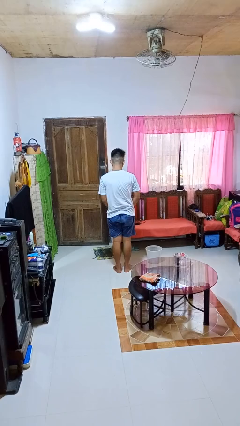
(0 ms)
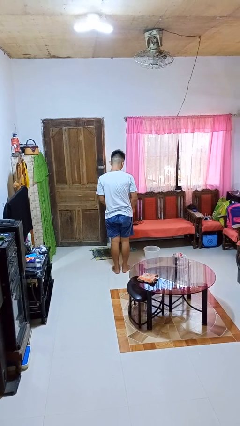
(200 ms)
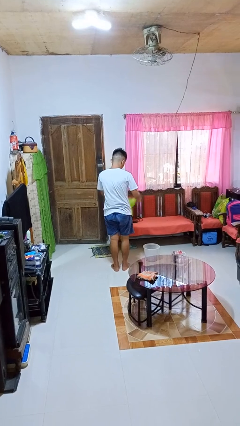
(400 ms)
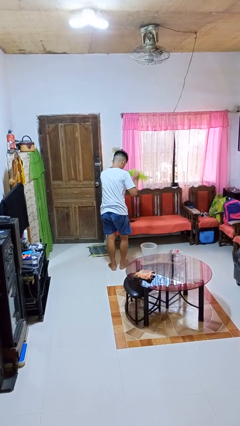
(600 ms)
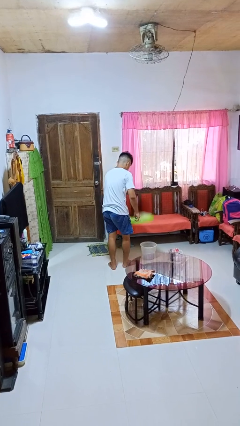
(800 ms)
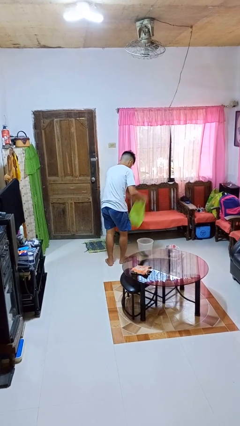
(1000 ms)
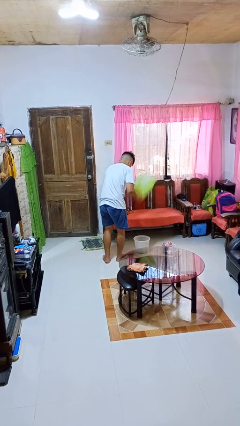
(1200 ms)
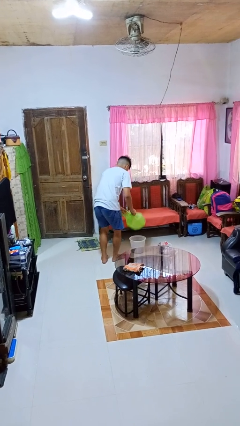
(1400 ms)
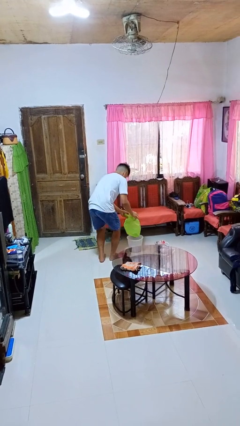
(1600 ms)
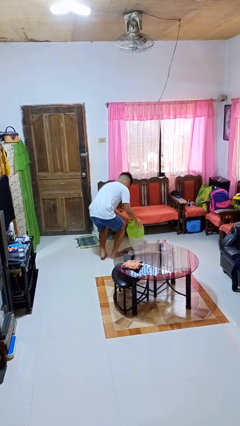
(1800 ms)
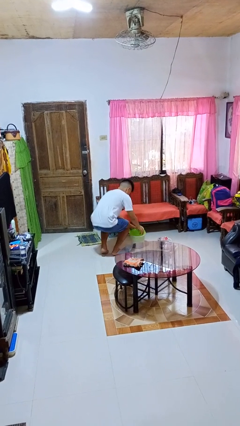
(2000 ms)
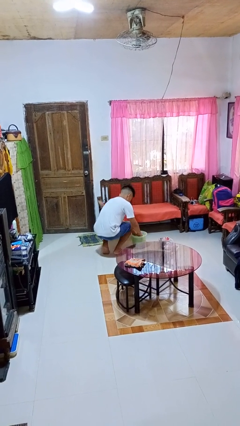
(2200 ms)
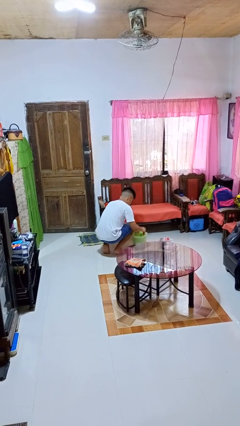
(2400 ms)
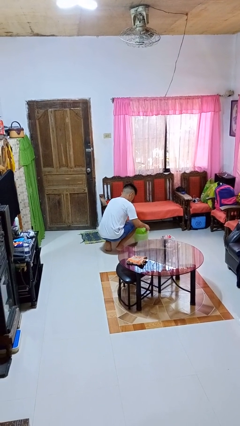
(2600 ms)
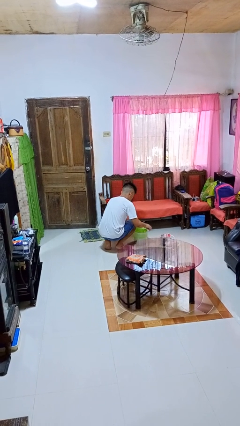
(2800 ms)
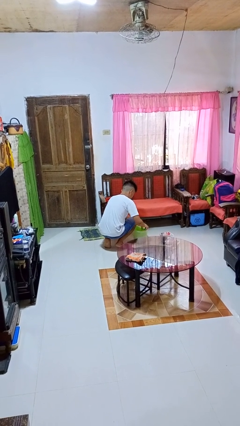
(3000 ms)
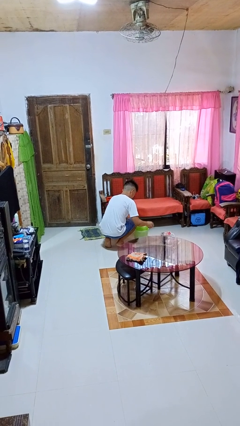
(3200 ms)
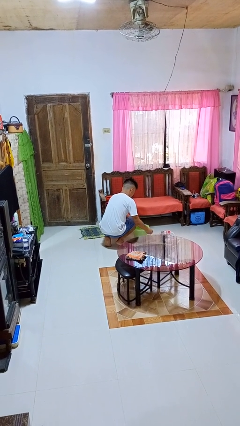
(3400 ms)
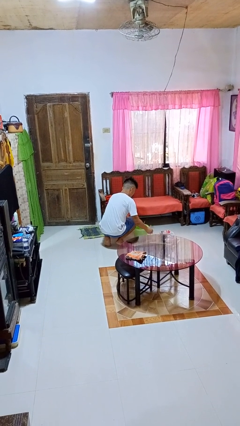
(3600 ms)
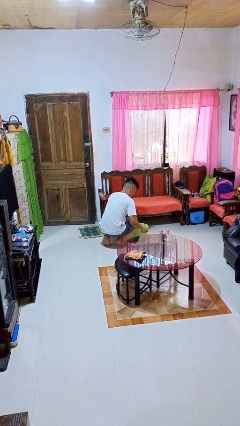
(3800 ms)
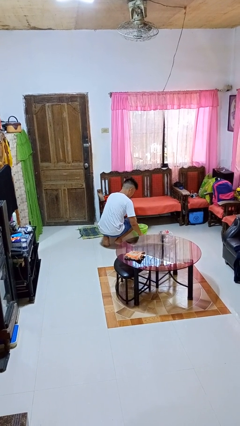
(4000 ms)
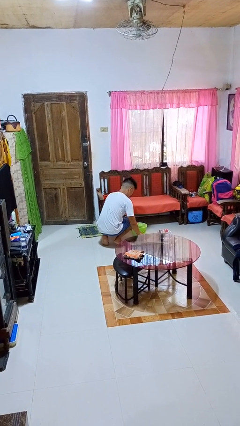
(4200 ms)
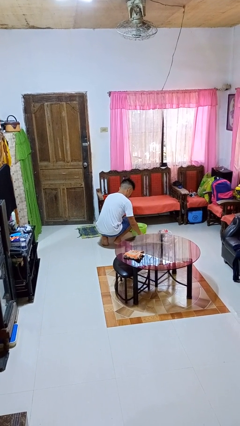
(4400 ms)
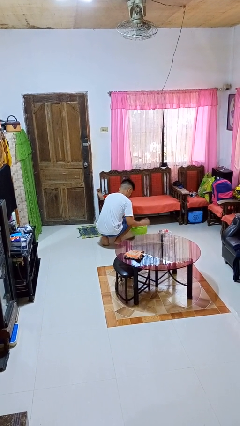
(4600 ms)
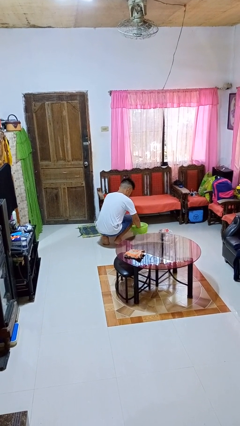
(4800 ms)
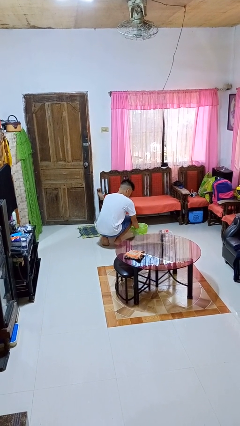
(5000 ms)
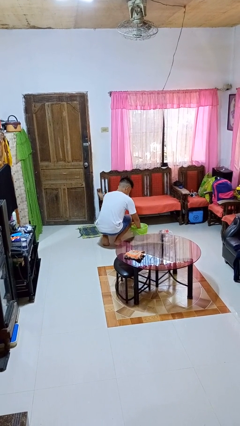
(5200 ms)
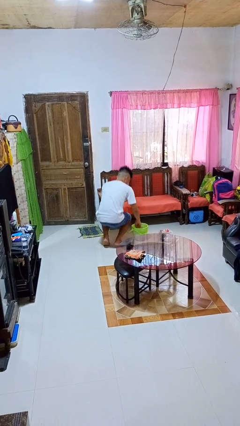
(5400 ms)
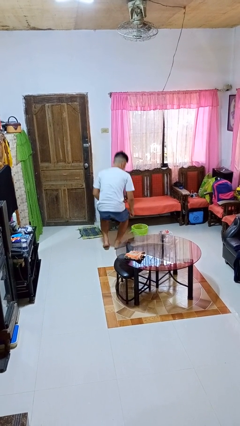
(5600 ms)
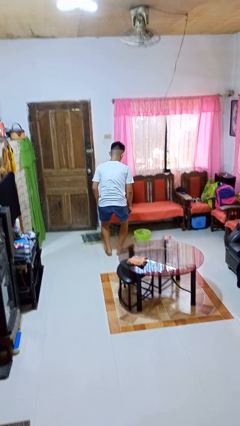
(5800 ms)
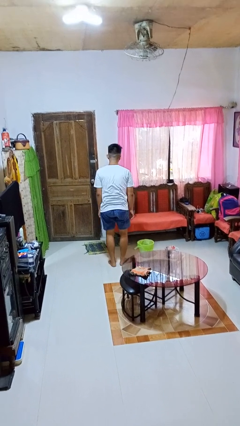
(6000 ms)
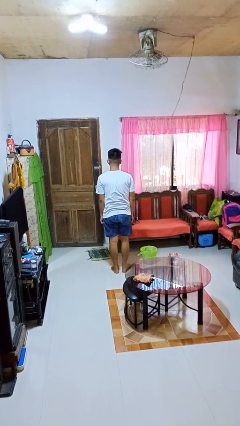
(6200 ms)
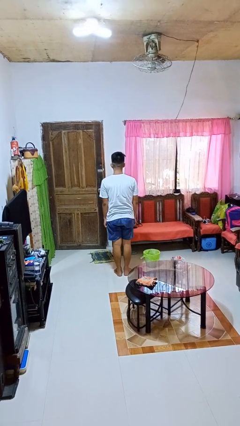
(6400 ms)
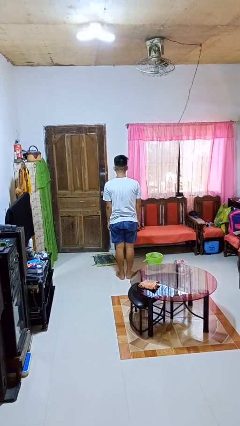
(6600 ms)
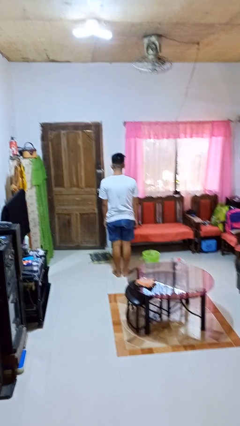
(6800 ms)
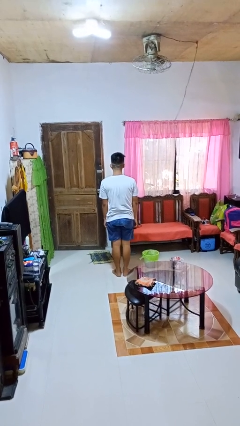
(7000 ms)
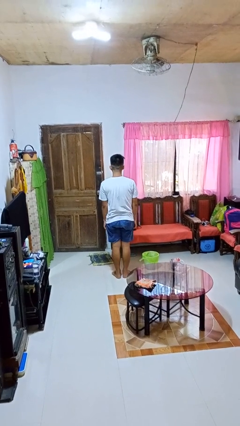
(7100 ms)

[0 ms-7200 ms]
person inserts trashbag into trashcan

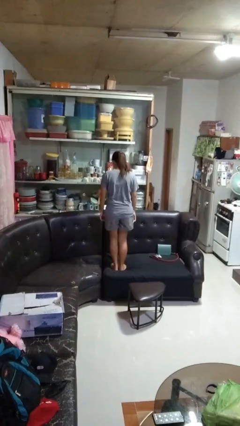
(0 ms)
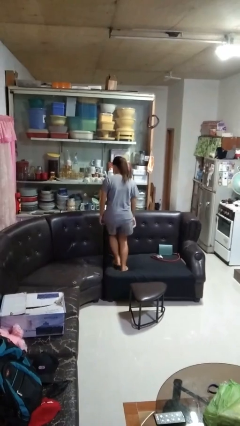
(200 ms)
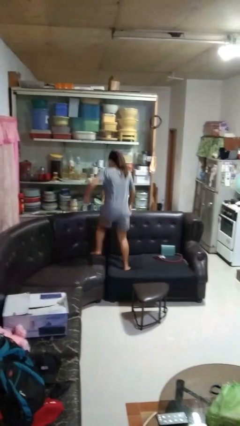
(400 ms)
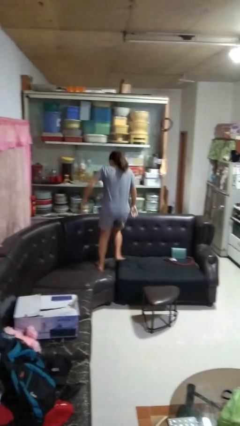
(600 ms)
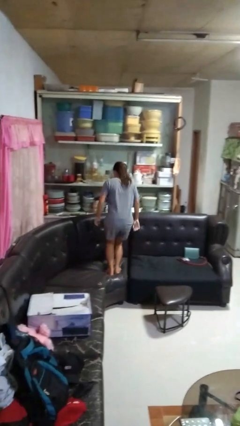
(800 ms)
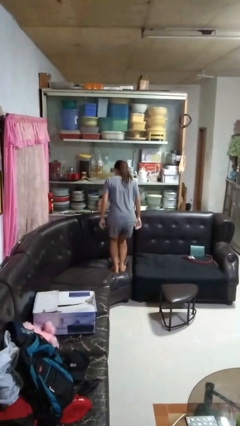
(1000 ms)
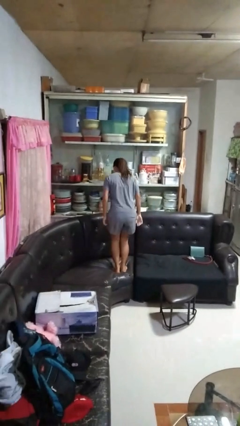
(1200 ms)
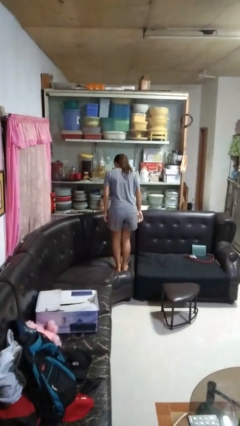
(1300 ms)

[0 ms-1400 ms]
person jumps on couch

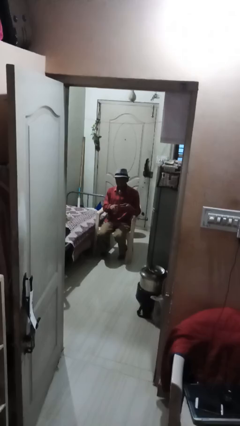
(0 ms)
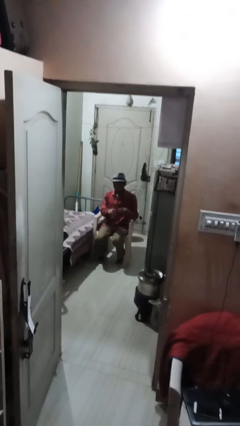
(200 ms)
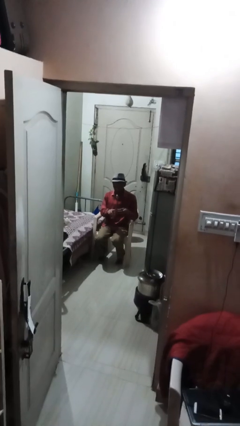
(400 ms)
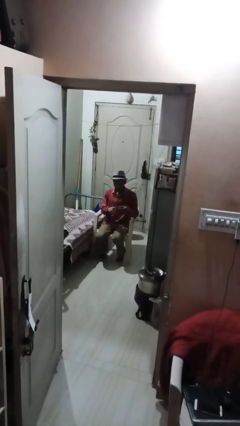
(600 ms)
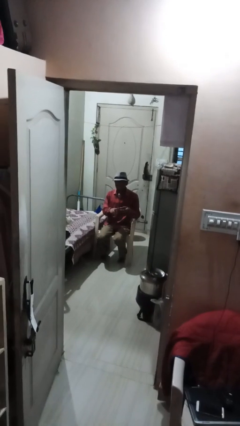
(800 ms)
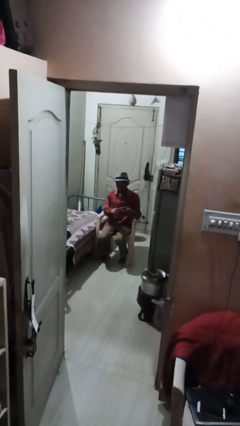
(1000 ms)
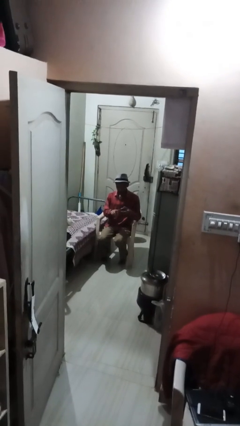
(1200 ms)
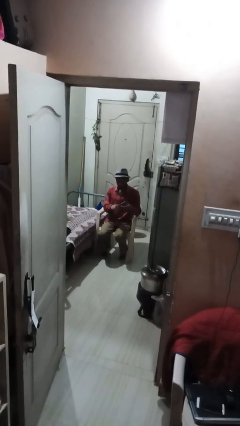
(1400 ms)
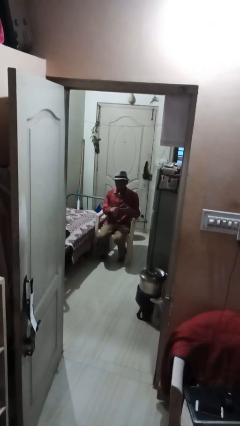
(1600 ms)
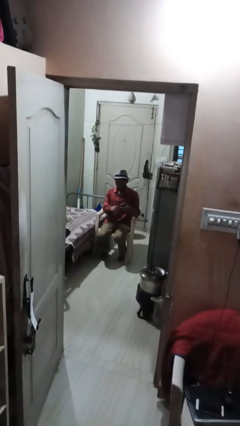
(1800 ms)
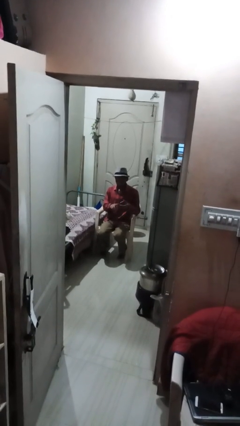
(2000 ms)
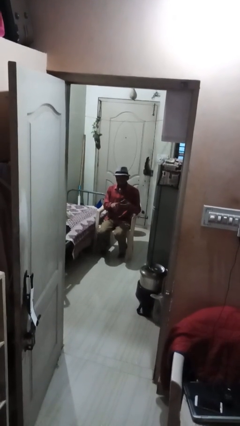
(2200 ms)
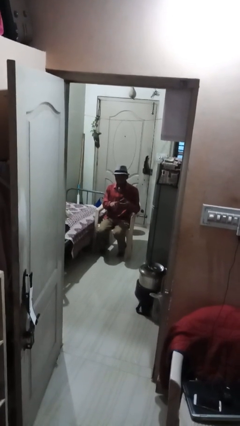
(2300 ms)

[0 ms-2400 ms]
person clips fingernails

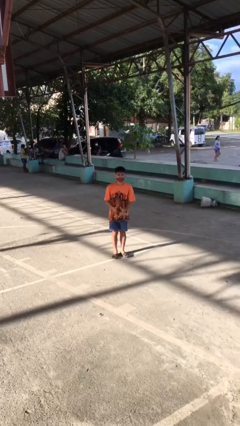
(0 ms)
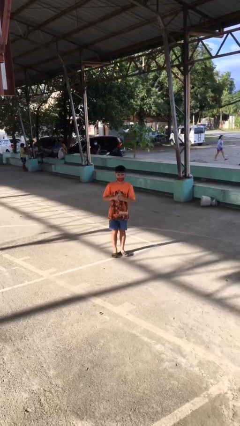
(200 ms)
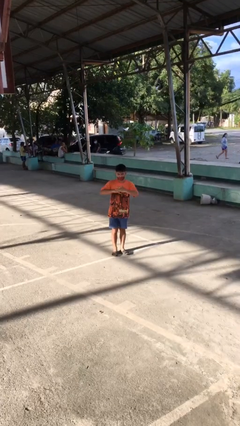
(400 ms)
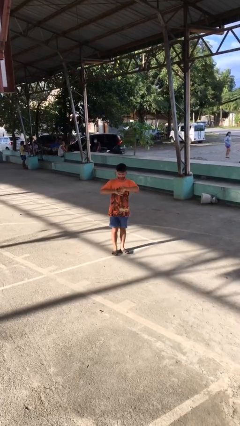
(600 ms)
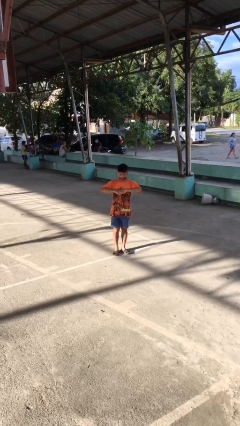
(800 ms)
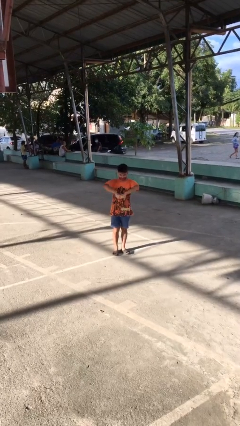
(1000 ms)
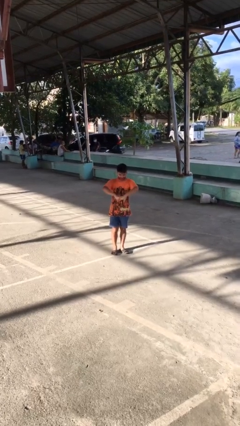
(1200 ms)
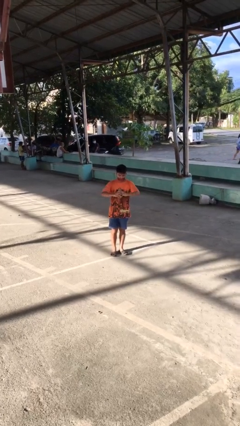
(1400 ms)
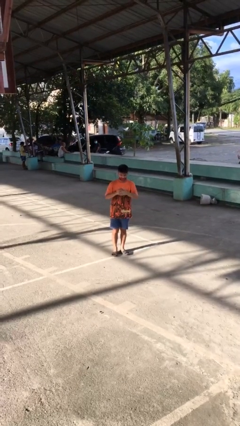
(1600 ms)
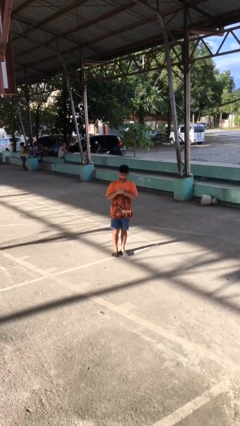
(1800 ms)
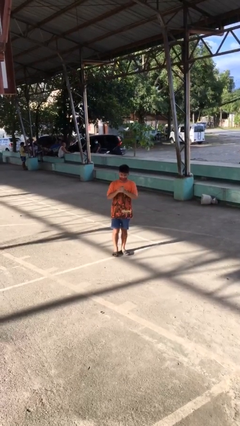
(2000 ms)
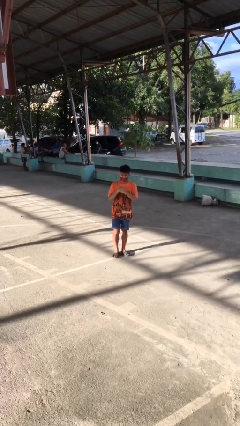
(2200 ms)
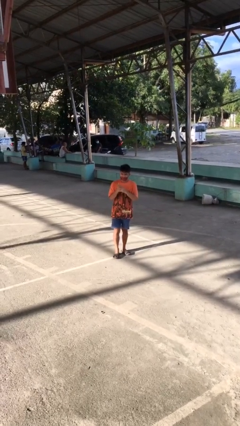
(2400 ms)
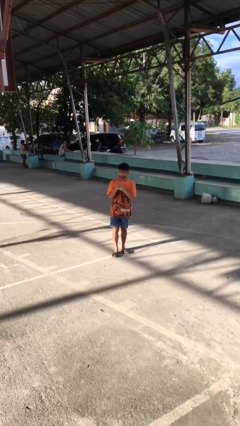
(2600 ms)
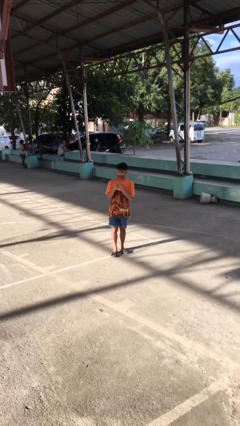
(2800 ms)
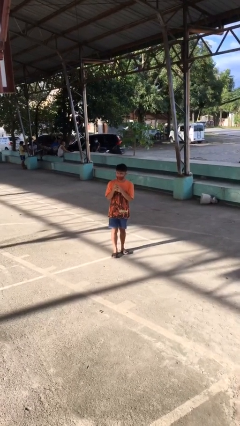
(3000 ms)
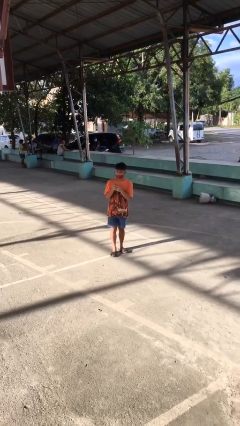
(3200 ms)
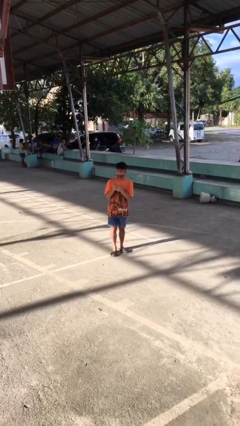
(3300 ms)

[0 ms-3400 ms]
person cracks knuckles

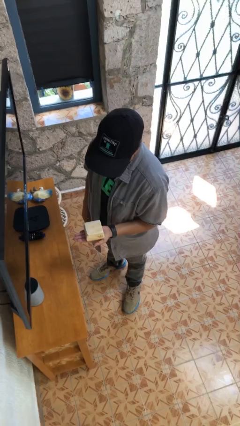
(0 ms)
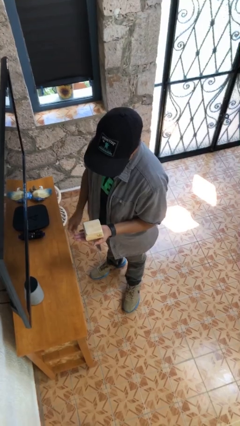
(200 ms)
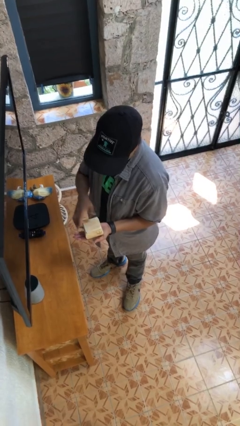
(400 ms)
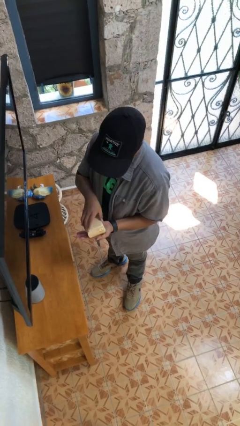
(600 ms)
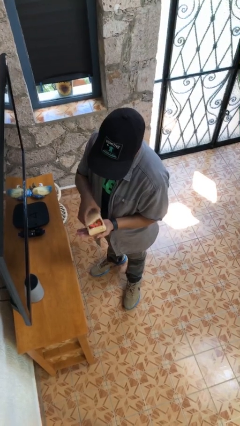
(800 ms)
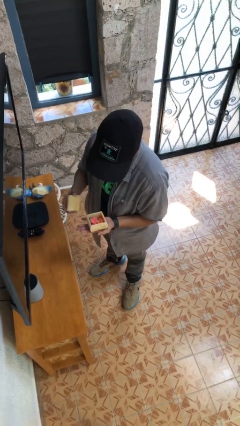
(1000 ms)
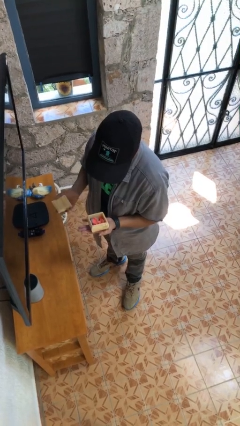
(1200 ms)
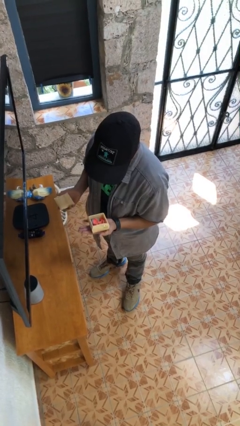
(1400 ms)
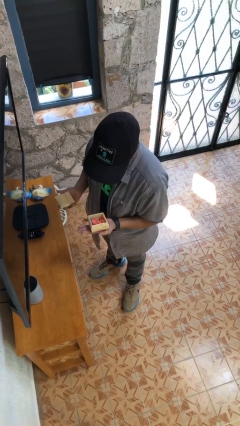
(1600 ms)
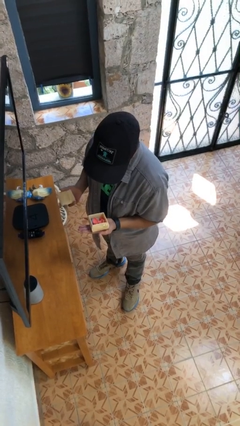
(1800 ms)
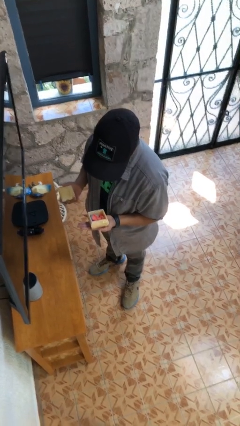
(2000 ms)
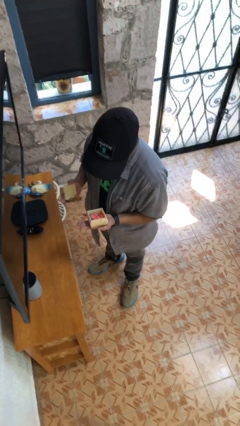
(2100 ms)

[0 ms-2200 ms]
person opens jewelry box

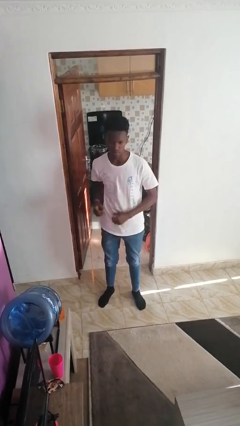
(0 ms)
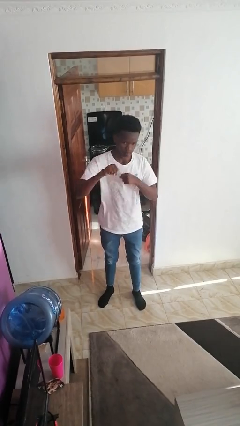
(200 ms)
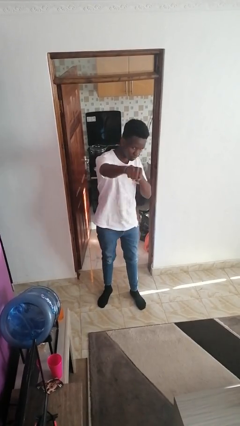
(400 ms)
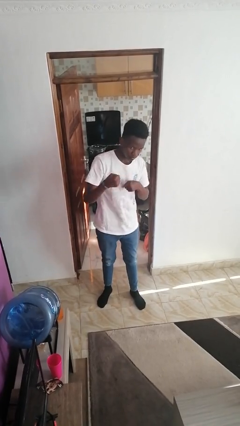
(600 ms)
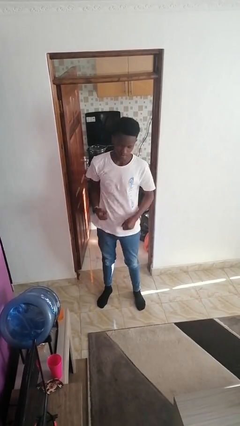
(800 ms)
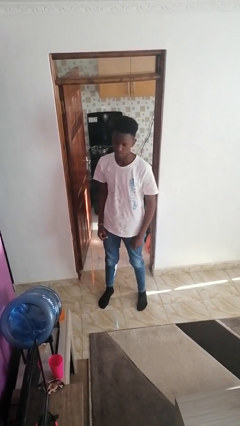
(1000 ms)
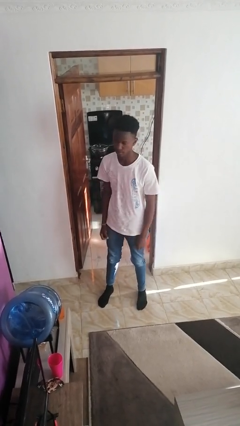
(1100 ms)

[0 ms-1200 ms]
person punches
